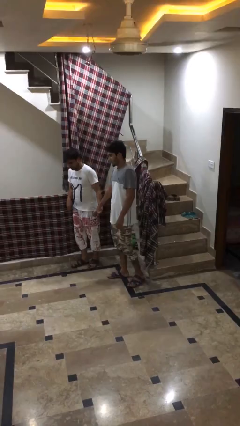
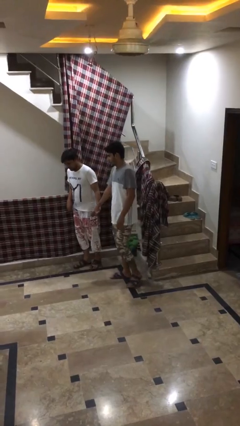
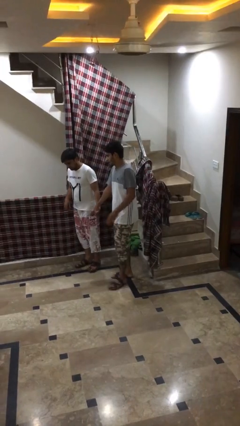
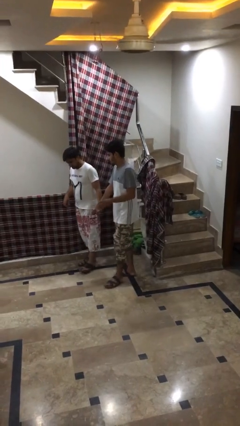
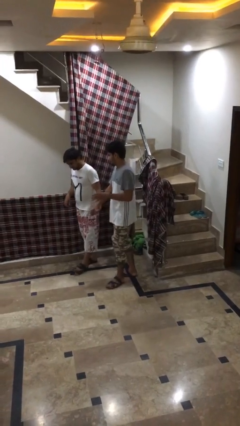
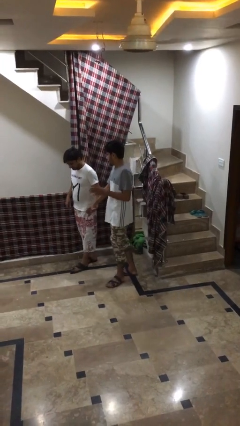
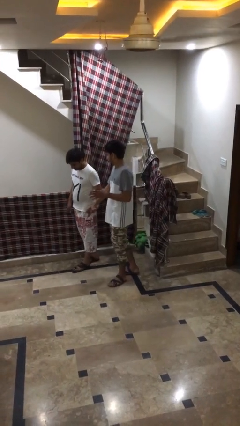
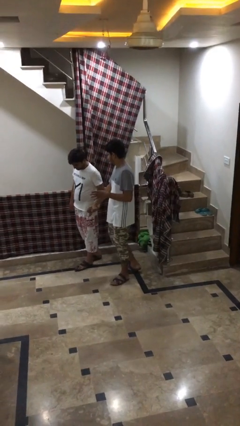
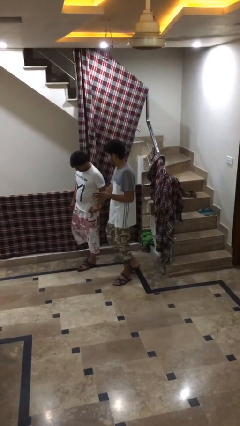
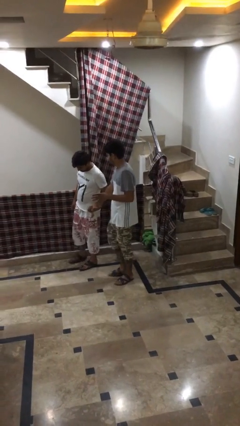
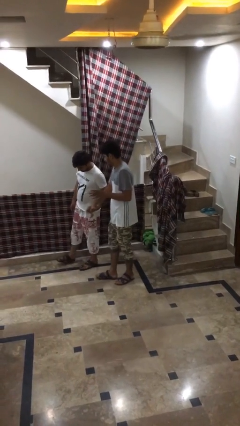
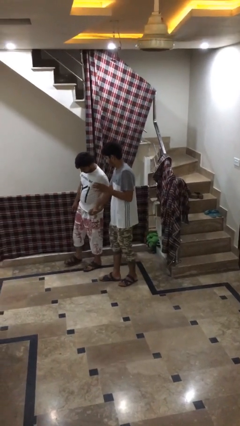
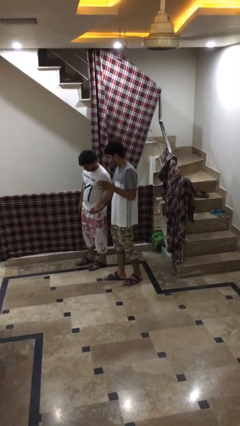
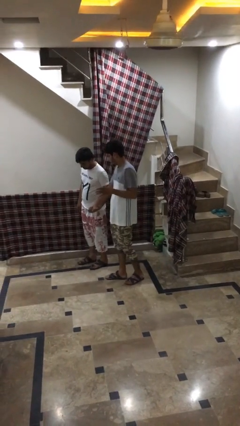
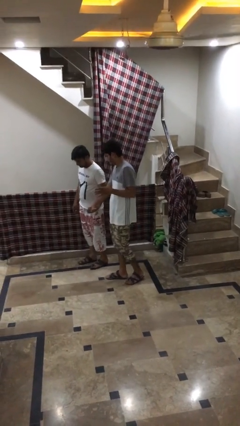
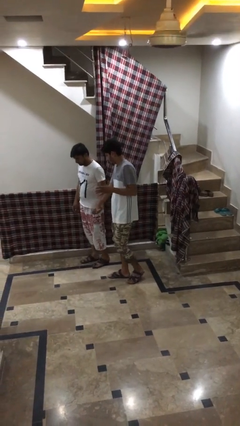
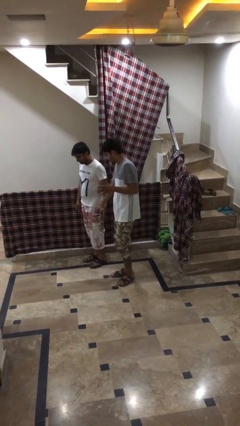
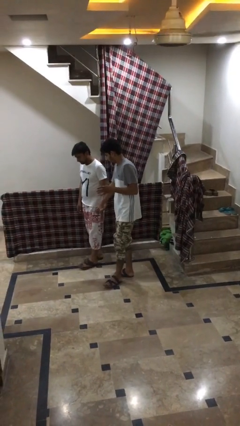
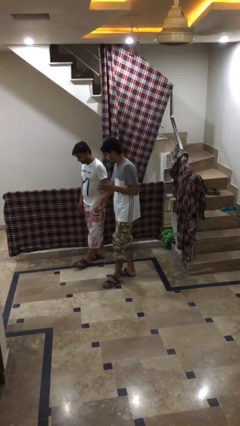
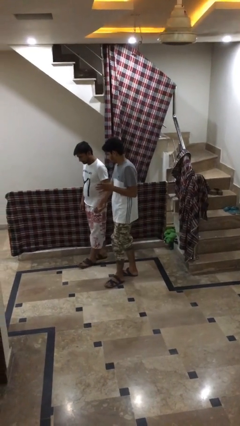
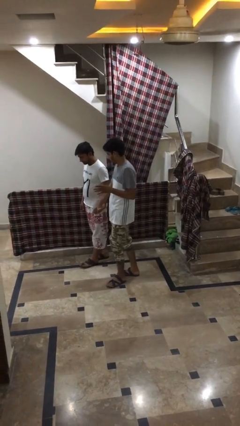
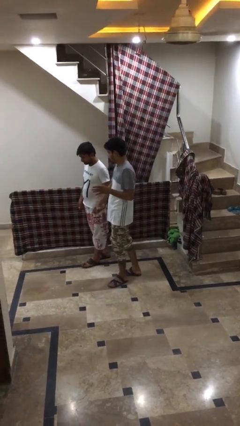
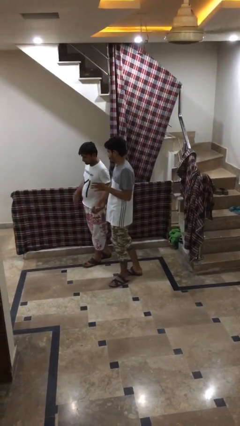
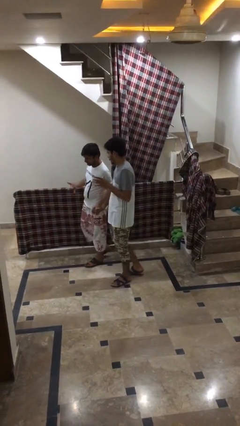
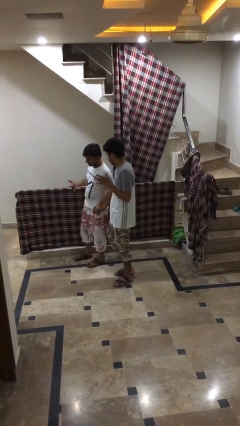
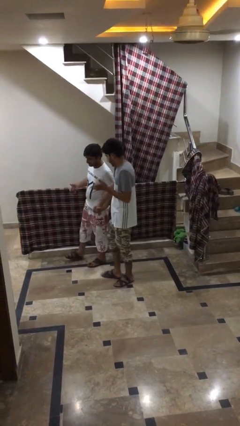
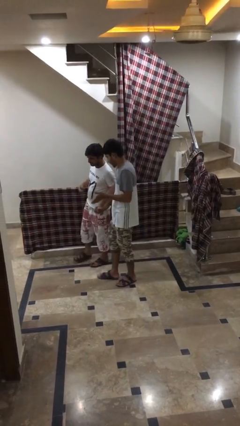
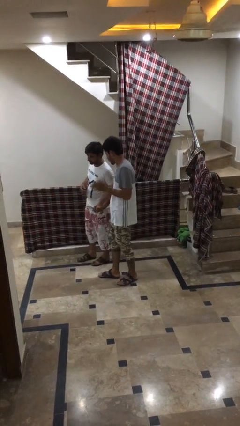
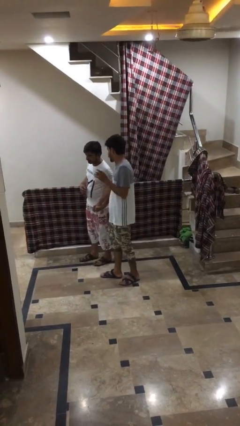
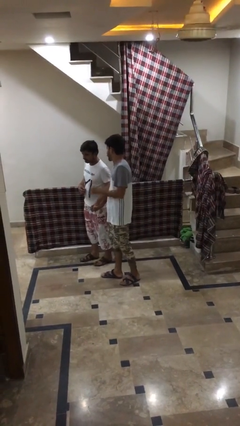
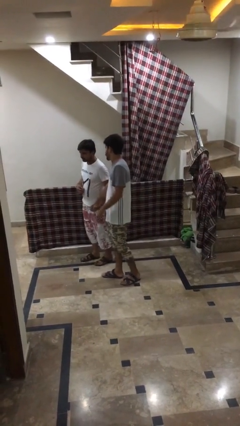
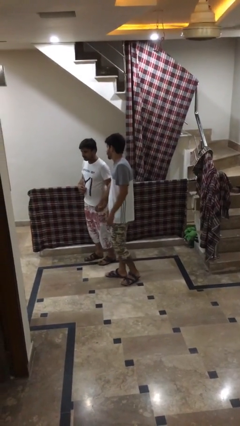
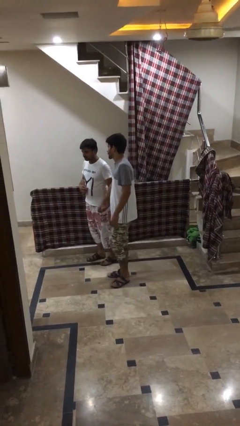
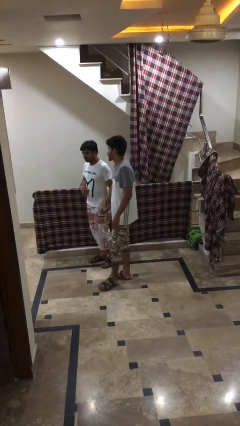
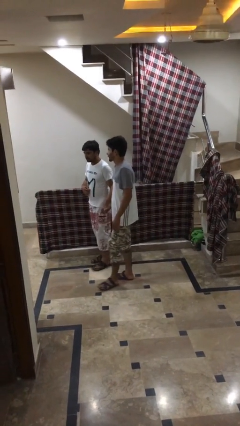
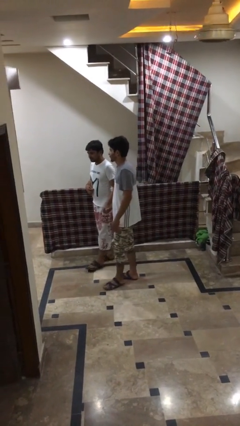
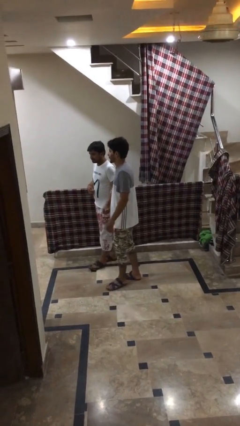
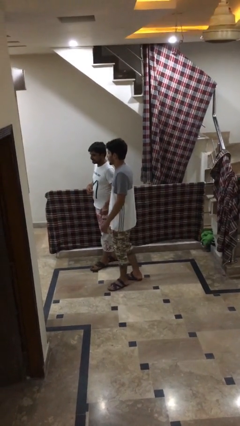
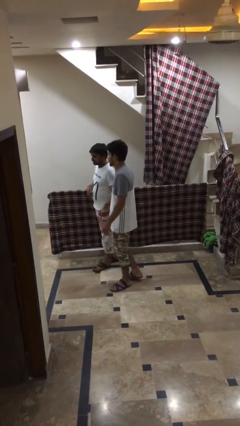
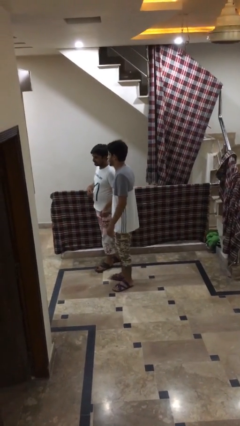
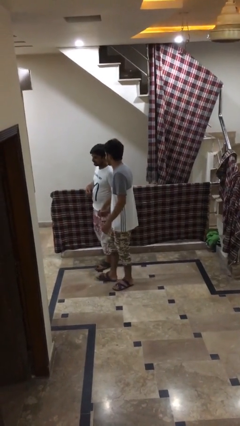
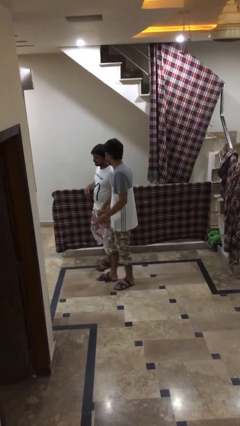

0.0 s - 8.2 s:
person holds hand

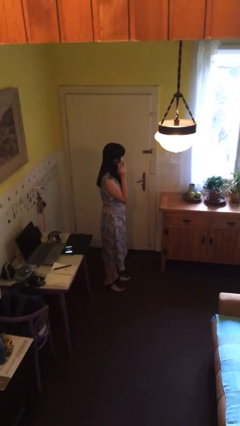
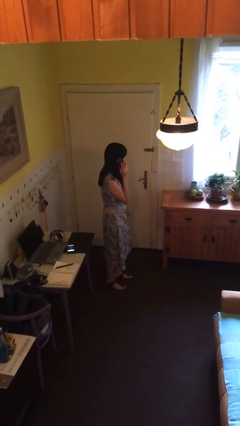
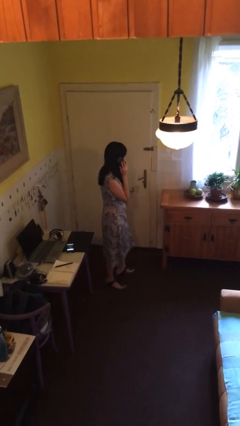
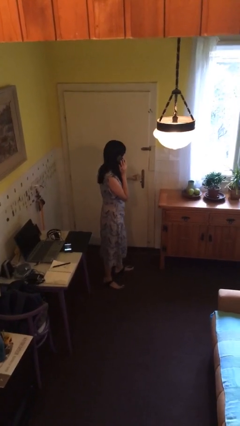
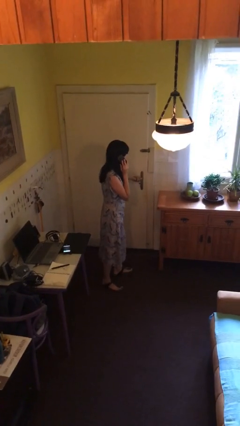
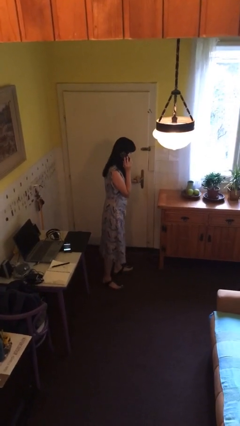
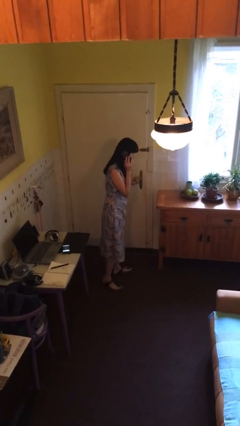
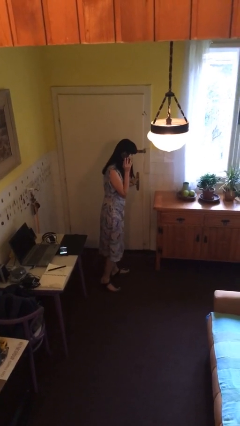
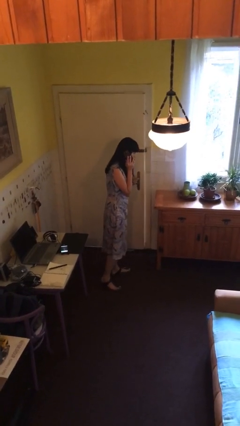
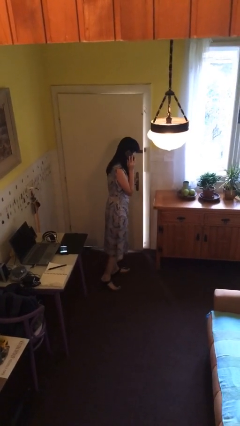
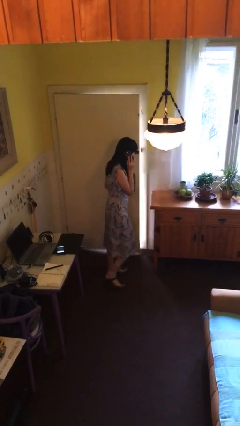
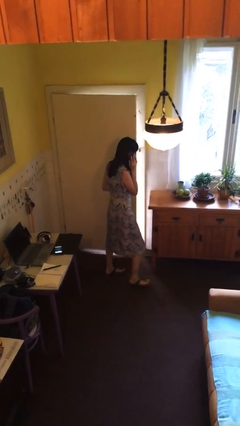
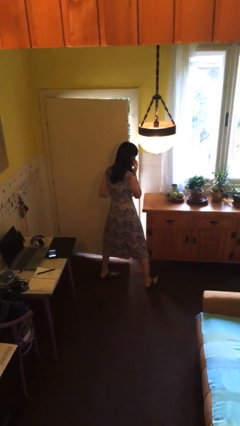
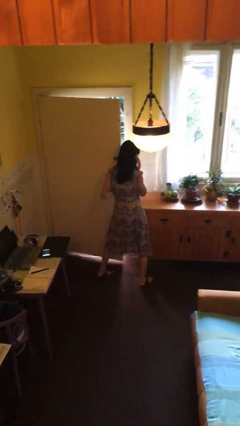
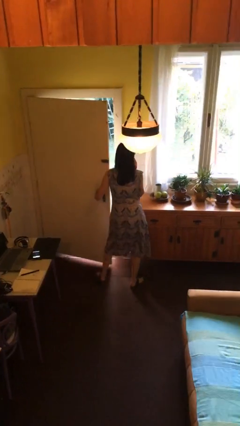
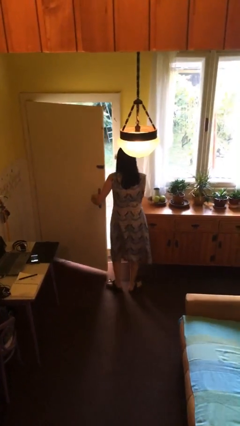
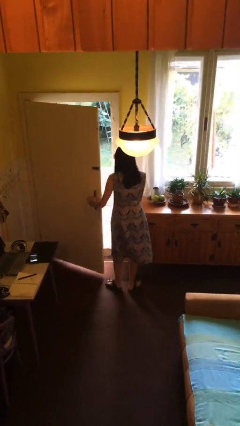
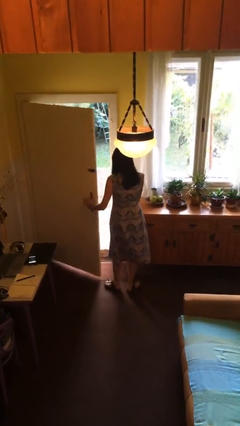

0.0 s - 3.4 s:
person opens facility door

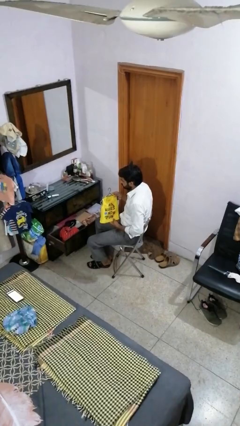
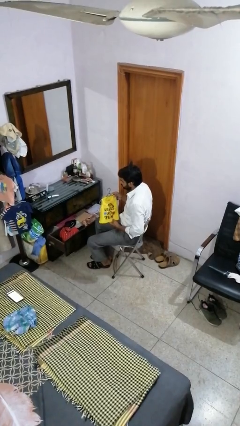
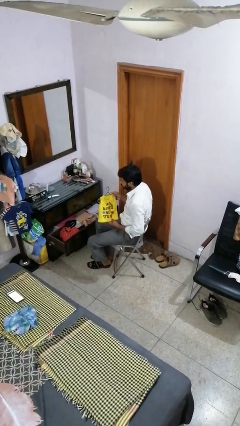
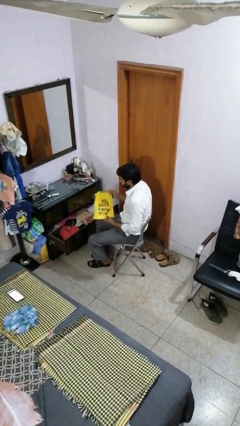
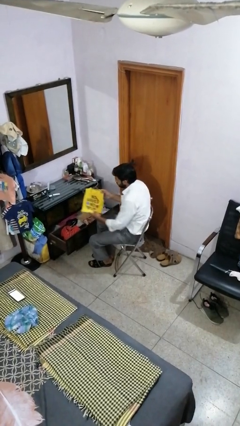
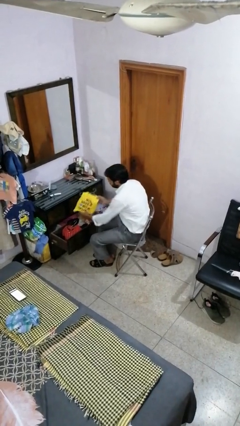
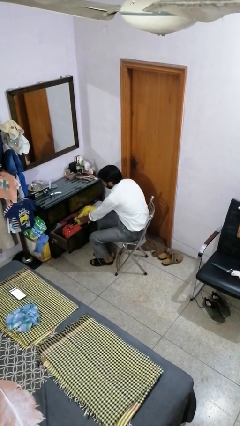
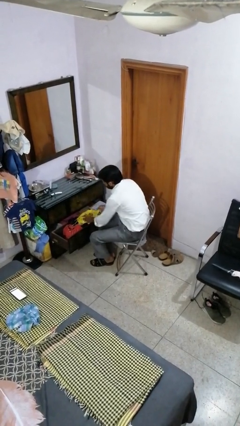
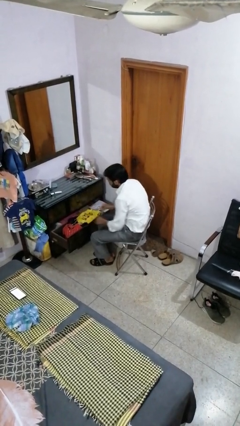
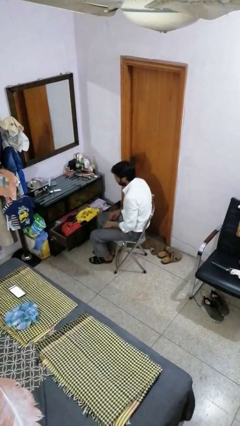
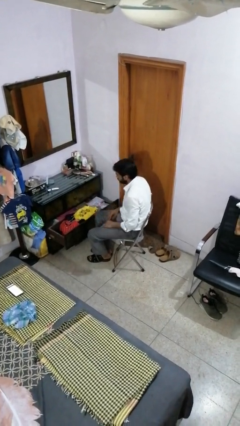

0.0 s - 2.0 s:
person puts clothes into dresser

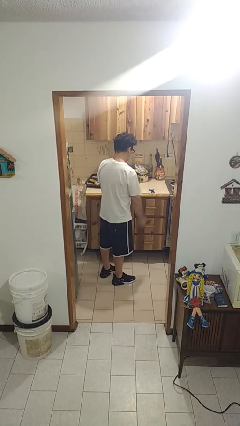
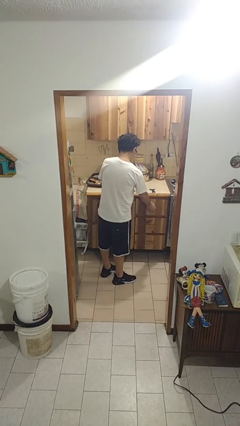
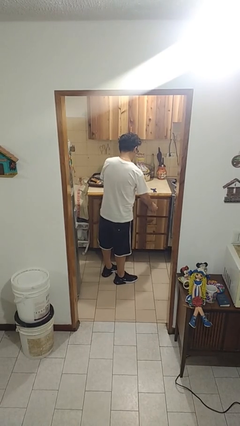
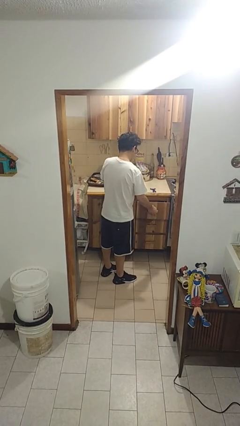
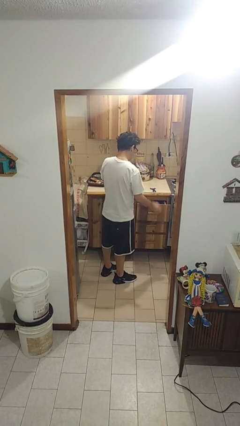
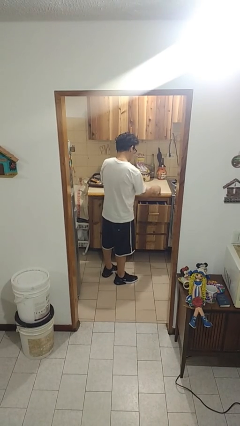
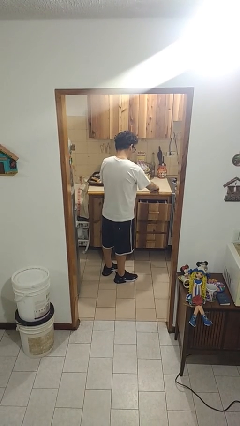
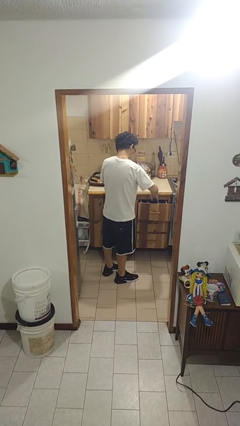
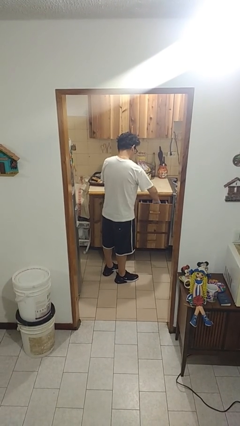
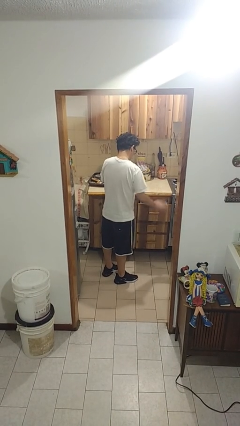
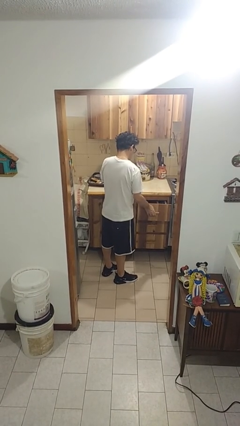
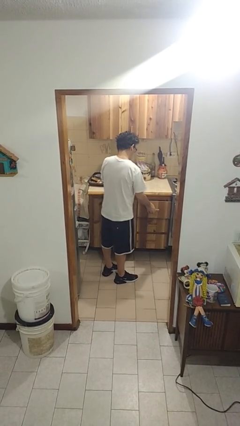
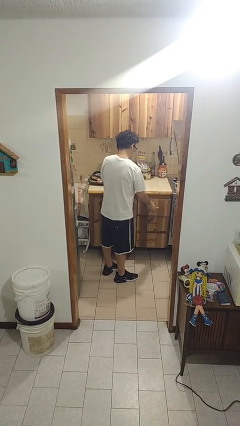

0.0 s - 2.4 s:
person puts object into kitchen drawer

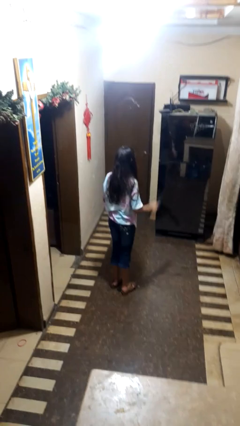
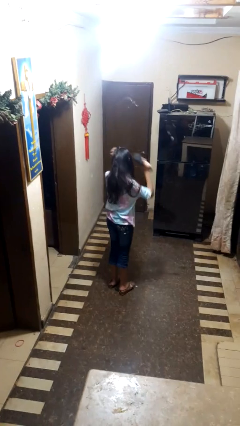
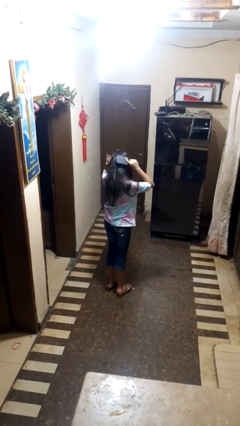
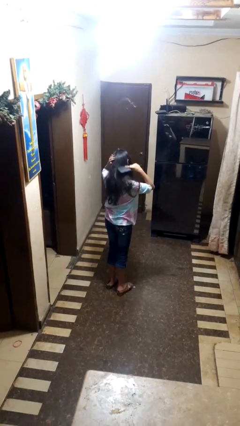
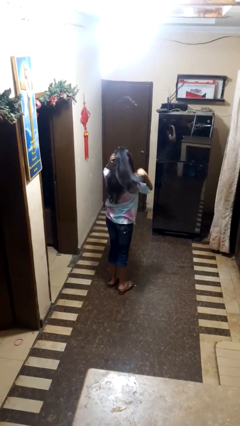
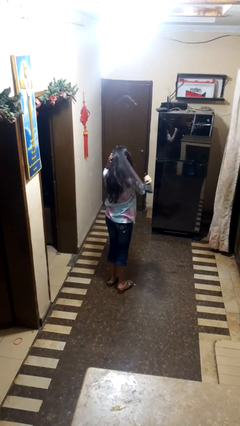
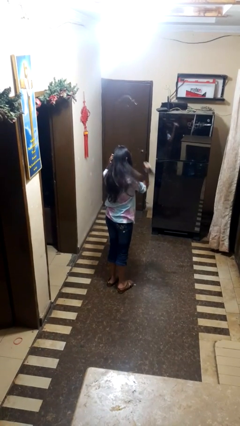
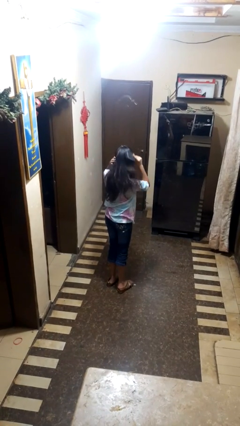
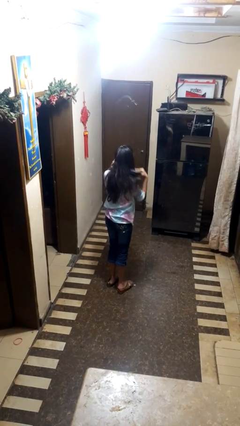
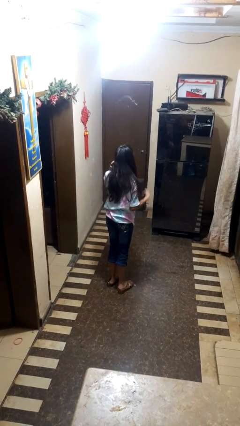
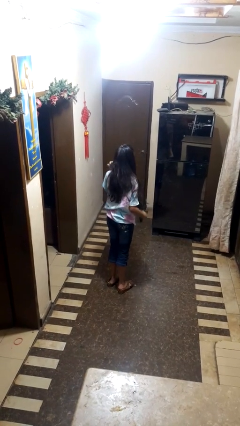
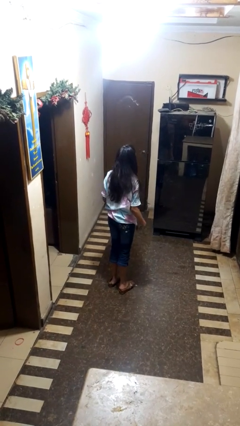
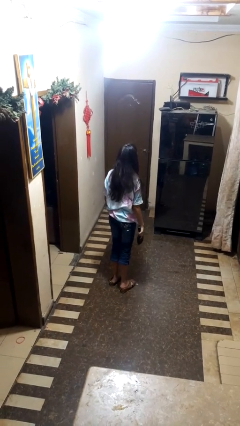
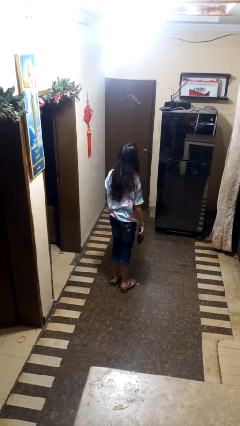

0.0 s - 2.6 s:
person brushes hair
